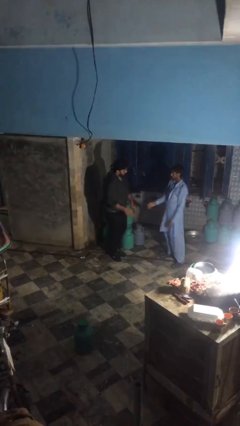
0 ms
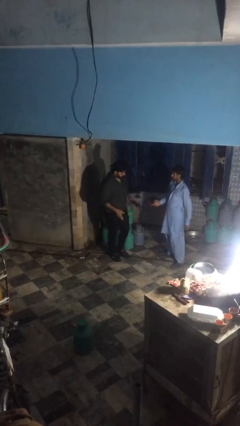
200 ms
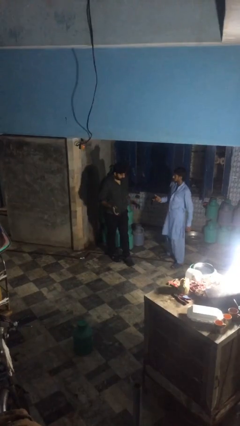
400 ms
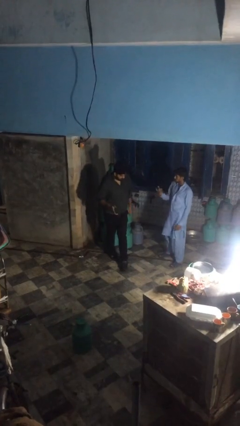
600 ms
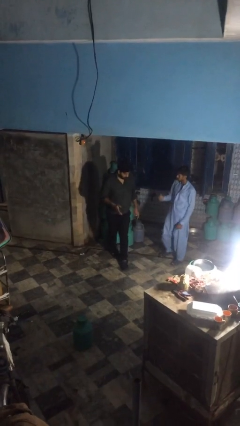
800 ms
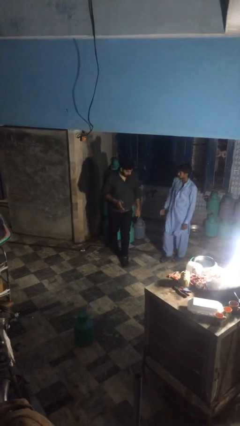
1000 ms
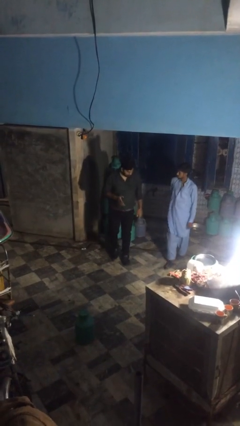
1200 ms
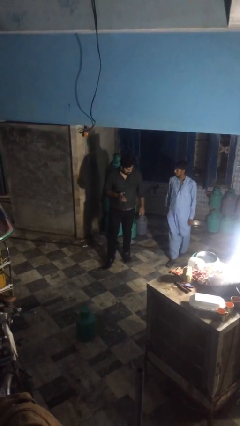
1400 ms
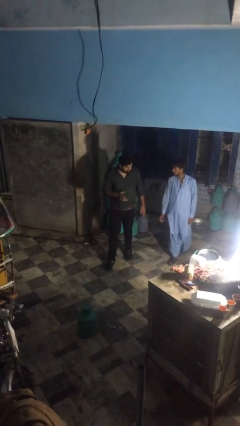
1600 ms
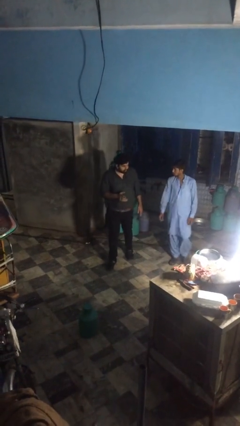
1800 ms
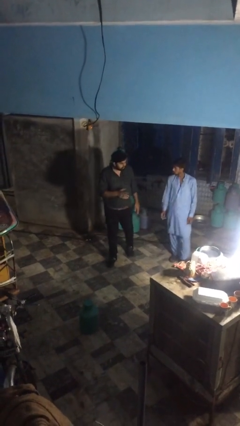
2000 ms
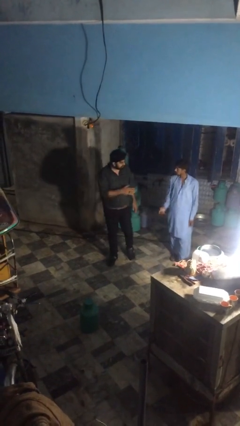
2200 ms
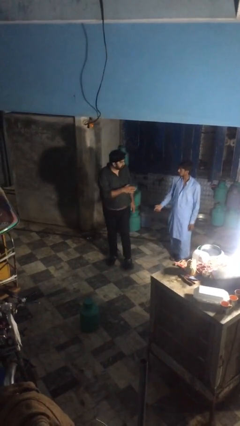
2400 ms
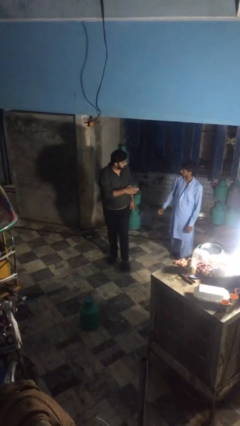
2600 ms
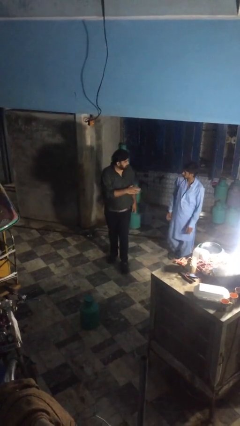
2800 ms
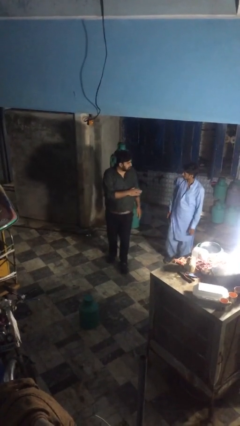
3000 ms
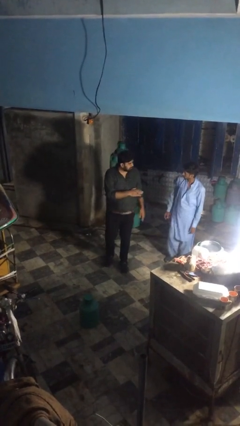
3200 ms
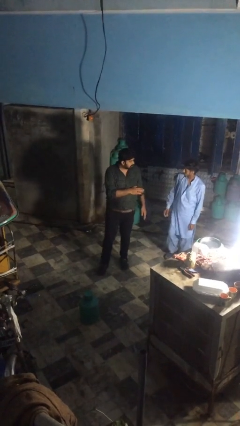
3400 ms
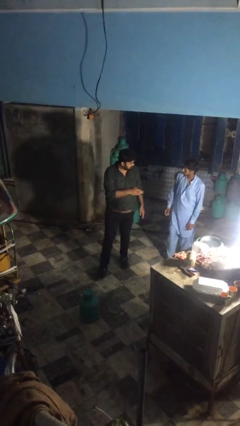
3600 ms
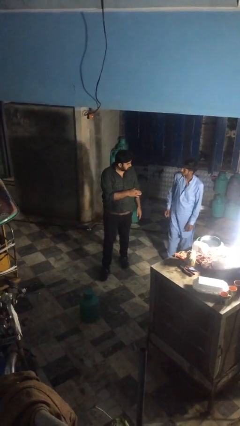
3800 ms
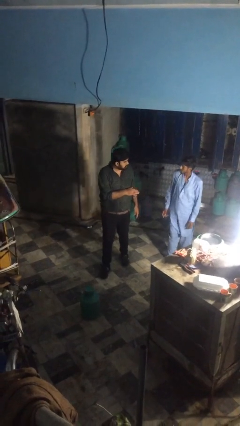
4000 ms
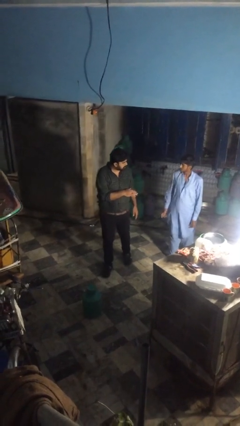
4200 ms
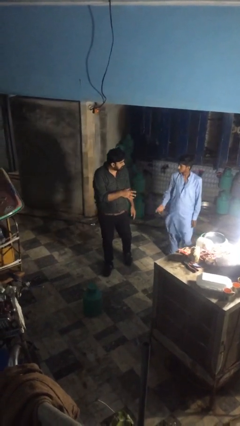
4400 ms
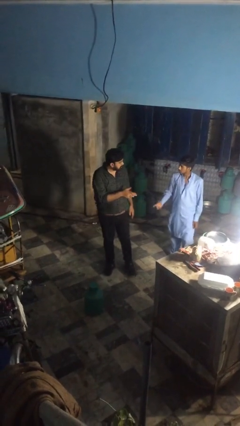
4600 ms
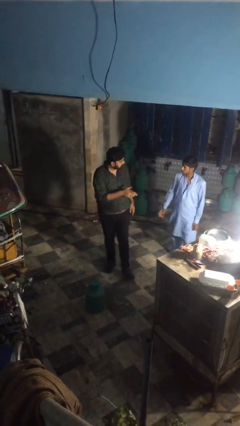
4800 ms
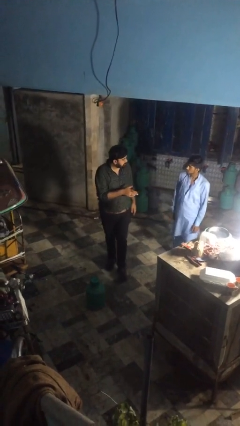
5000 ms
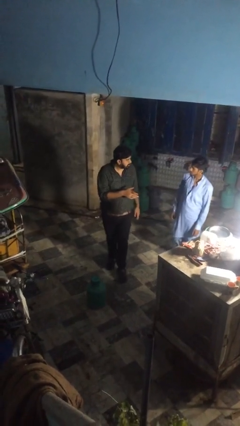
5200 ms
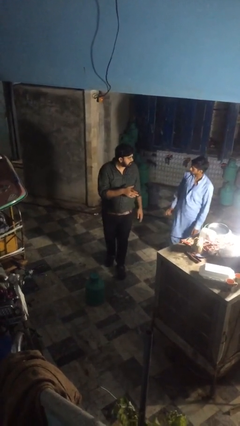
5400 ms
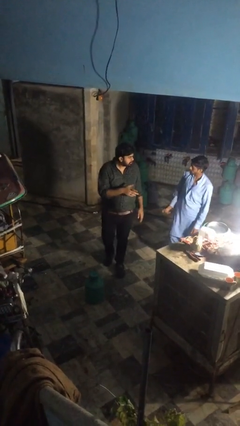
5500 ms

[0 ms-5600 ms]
person talks to person

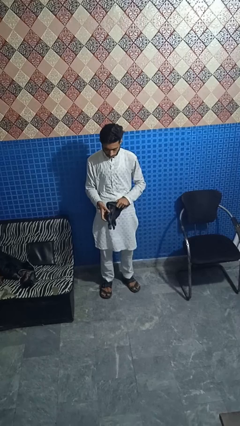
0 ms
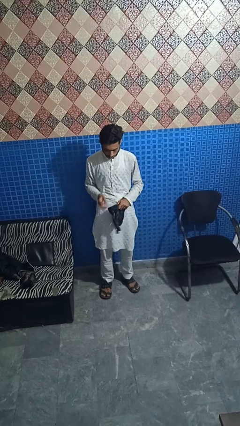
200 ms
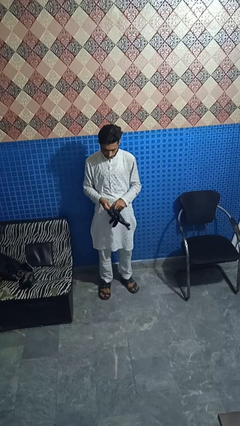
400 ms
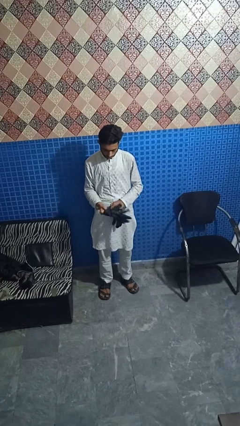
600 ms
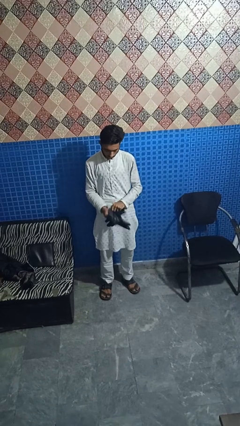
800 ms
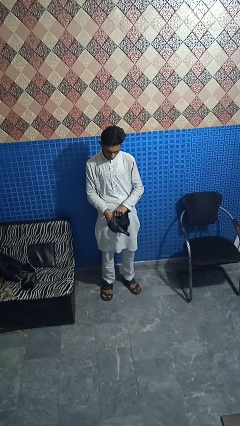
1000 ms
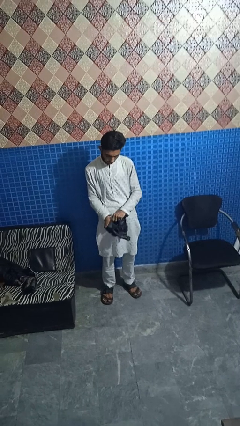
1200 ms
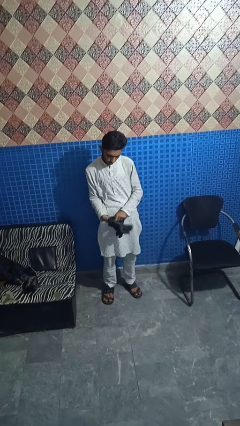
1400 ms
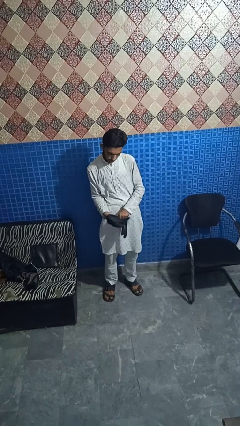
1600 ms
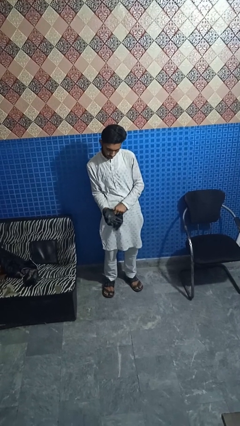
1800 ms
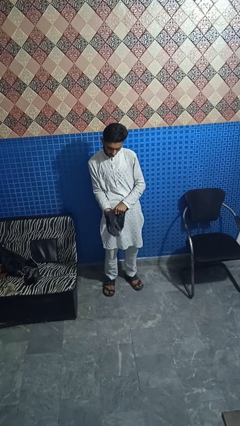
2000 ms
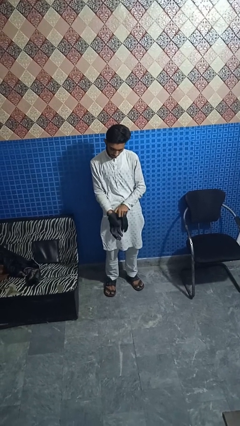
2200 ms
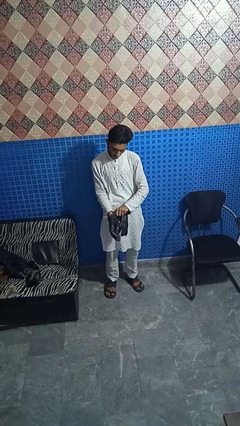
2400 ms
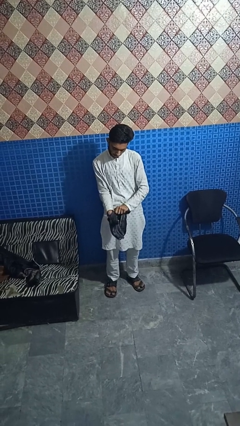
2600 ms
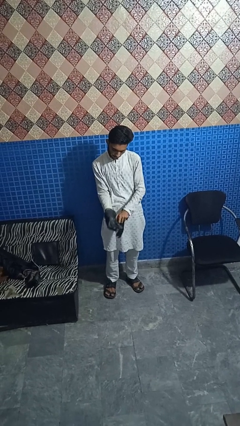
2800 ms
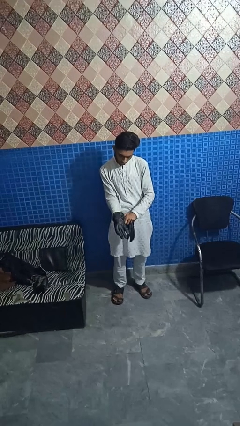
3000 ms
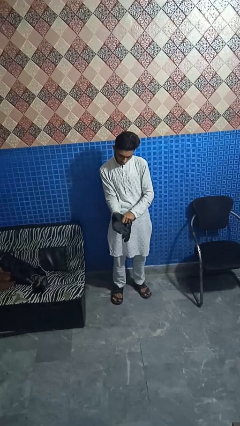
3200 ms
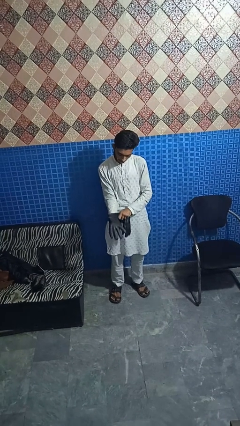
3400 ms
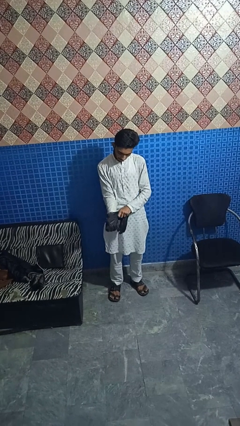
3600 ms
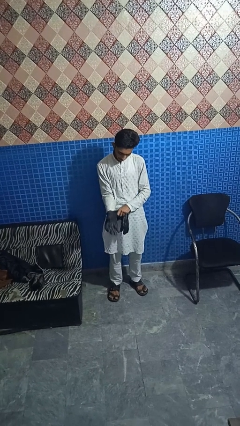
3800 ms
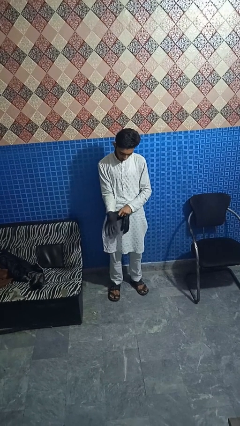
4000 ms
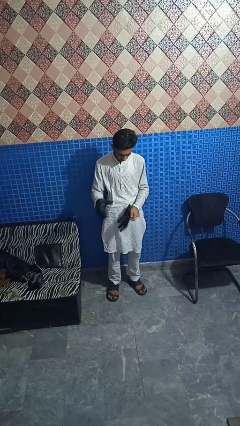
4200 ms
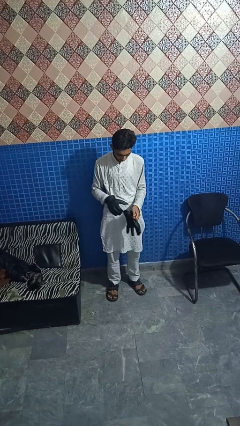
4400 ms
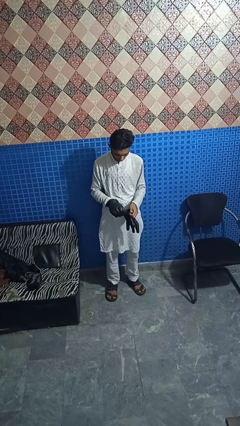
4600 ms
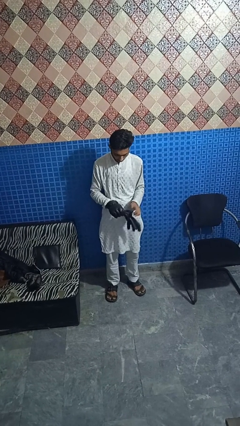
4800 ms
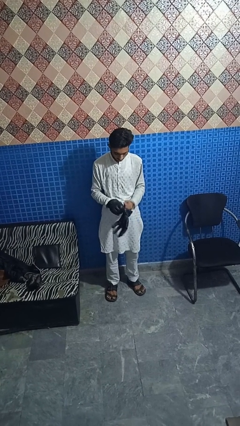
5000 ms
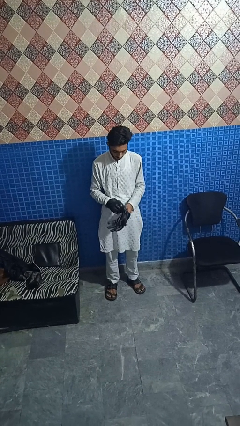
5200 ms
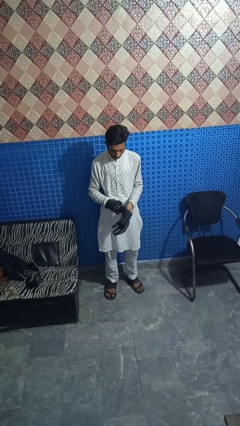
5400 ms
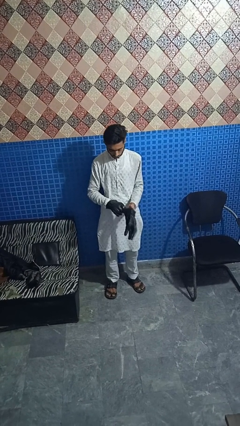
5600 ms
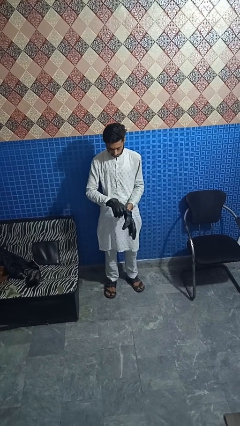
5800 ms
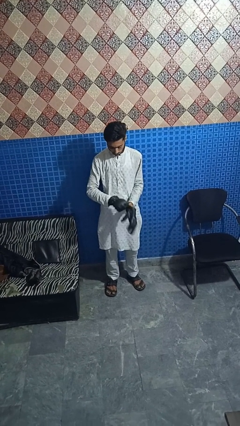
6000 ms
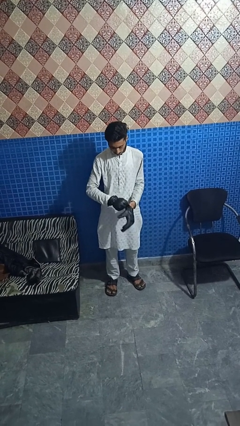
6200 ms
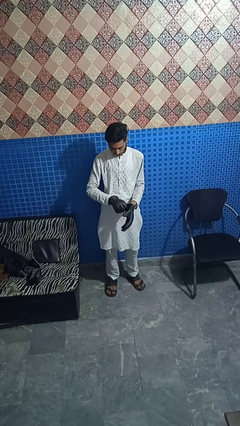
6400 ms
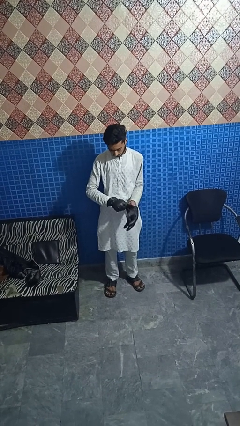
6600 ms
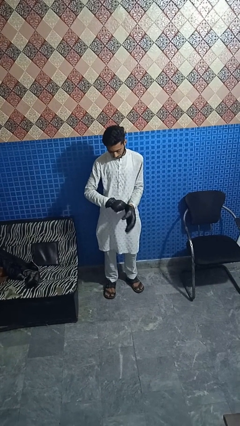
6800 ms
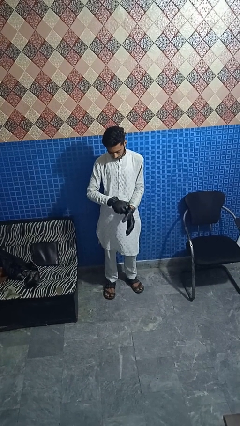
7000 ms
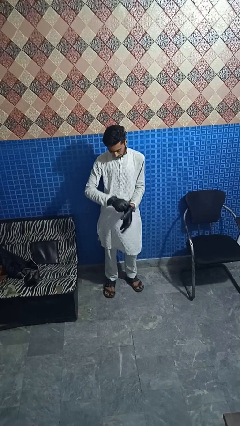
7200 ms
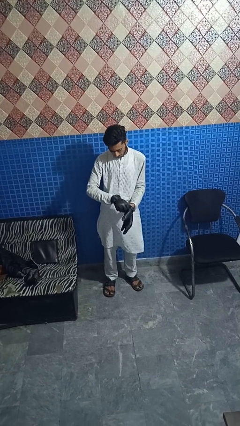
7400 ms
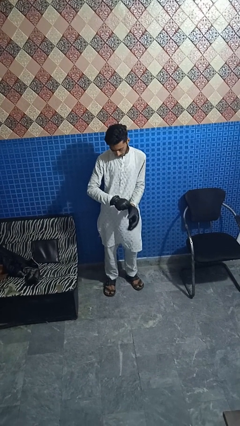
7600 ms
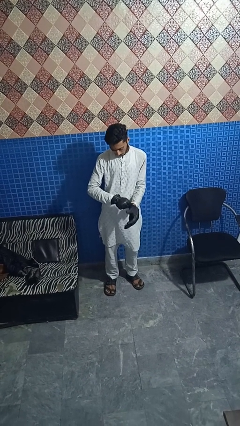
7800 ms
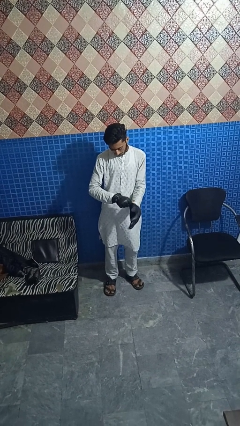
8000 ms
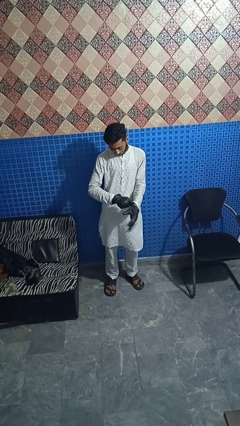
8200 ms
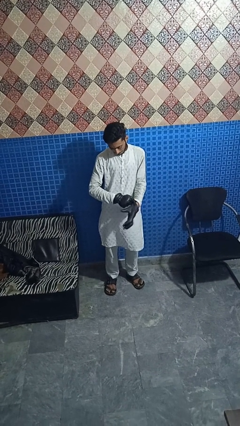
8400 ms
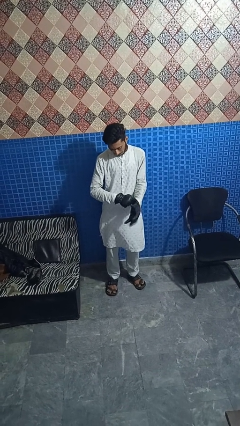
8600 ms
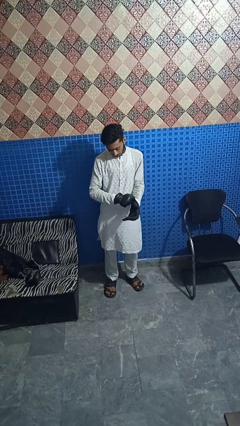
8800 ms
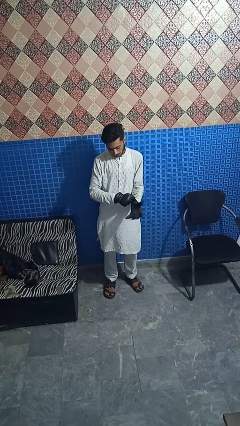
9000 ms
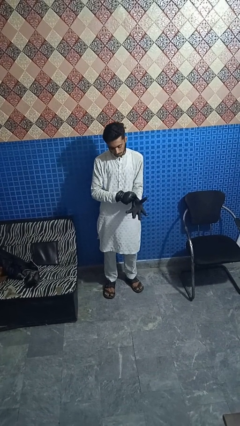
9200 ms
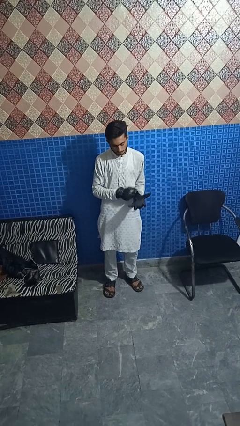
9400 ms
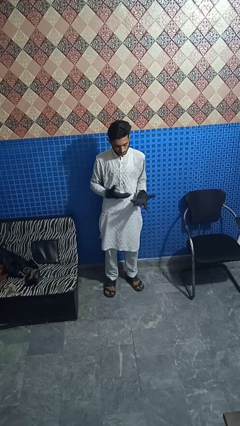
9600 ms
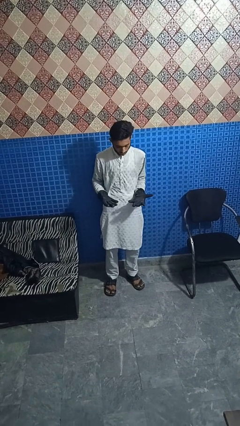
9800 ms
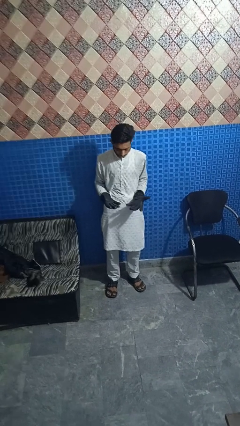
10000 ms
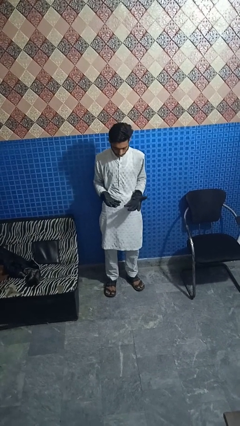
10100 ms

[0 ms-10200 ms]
person puts on gloves

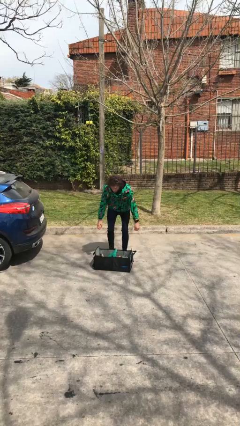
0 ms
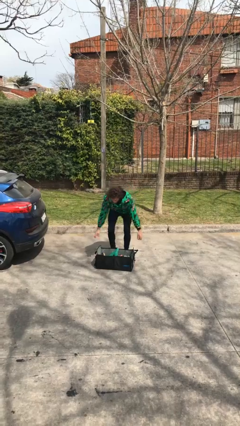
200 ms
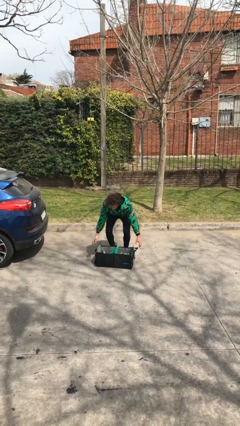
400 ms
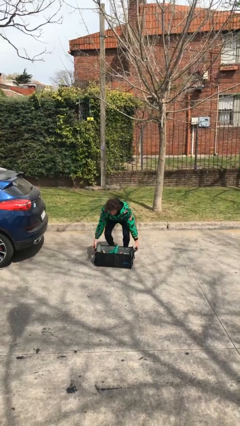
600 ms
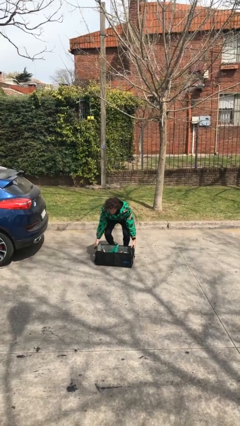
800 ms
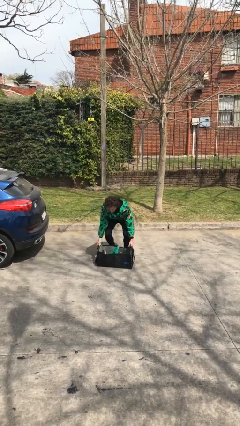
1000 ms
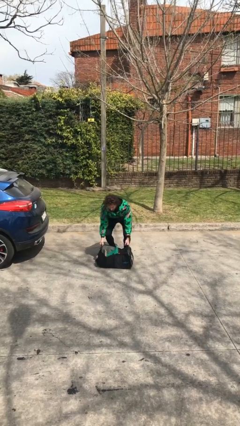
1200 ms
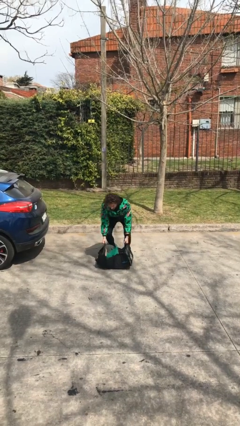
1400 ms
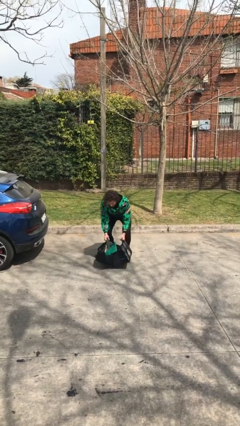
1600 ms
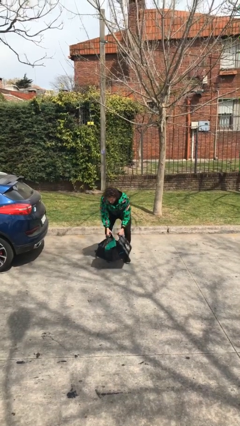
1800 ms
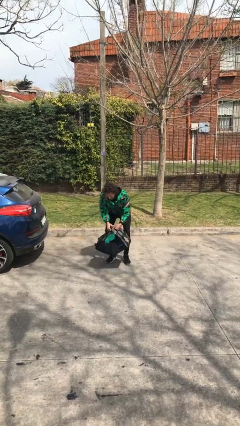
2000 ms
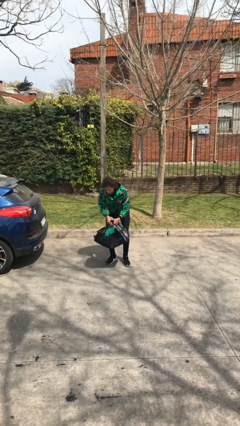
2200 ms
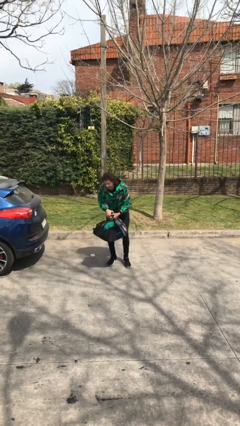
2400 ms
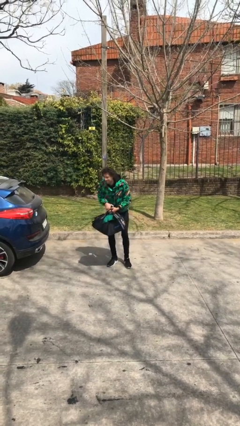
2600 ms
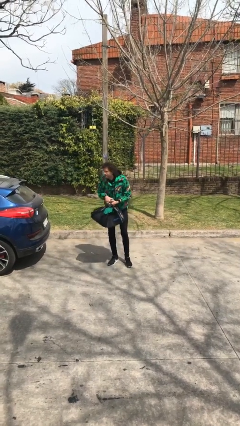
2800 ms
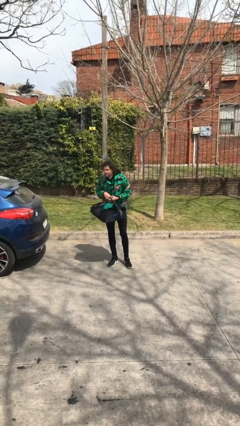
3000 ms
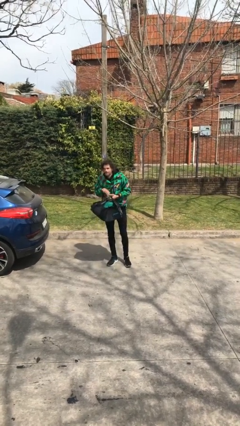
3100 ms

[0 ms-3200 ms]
person picks up object from floor
